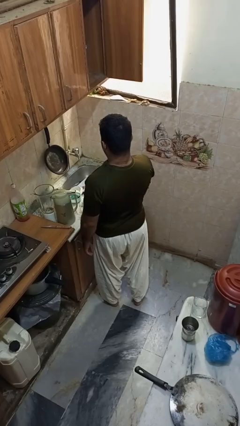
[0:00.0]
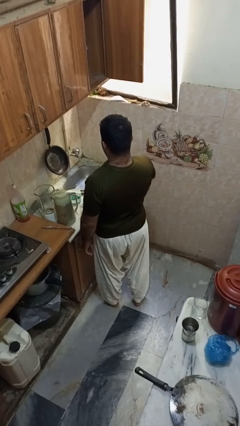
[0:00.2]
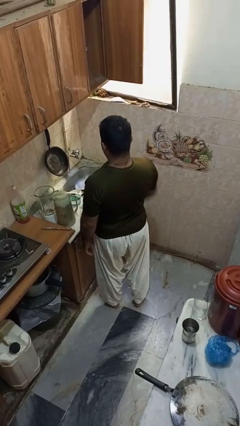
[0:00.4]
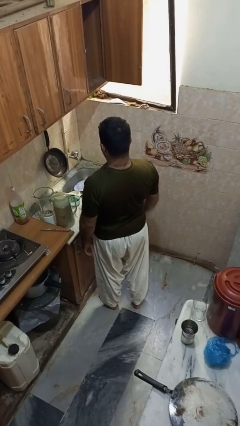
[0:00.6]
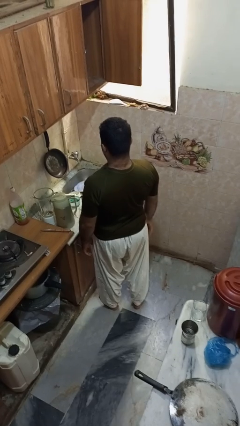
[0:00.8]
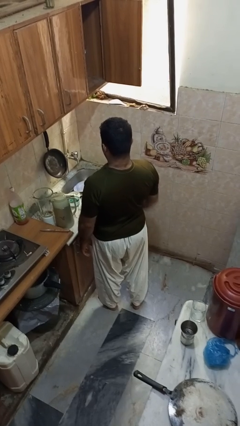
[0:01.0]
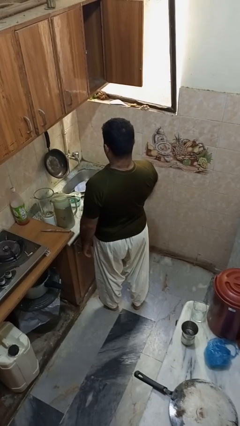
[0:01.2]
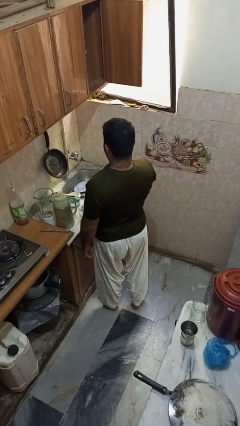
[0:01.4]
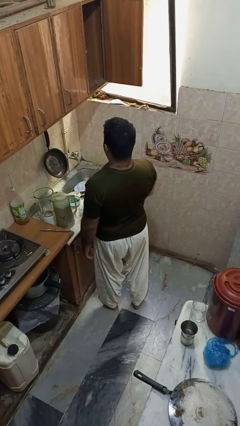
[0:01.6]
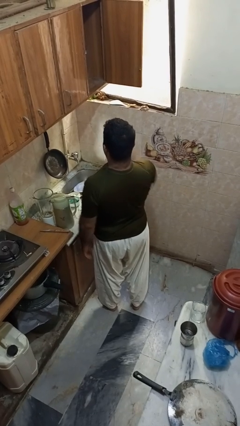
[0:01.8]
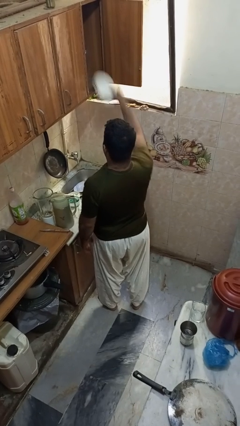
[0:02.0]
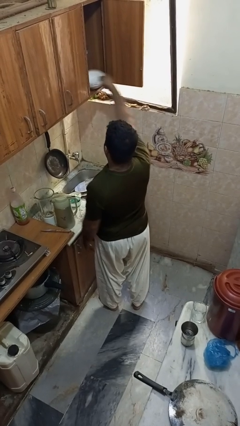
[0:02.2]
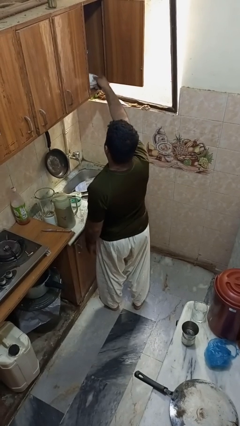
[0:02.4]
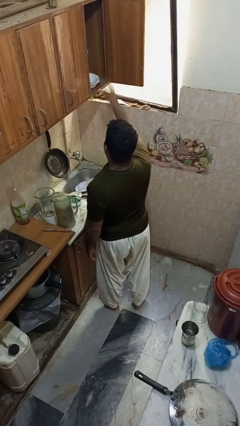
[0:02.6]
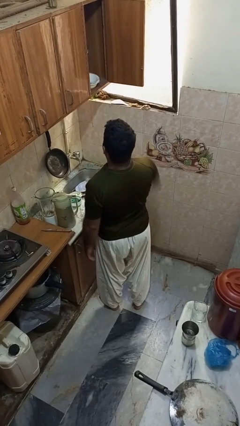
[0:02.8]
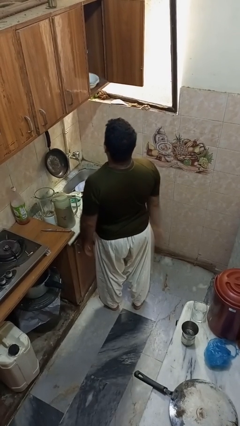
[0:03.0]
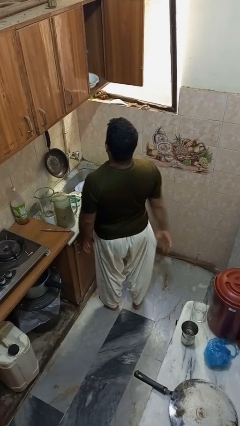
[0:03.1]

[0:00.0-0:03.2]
person puts object in cabinet

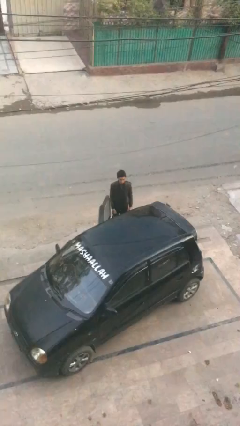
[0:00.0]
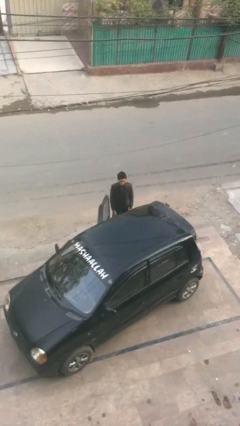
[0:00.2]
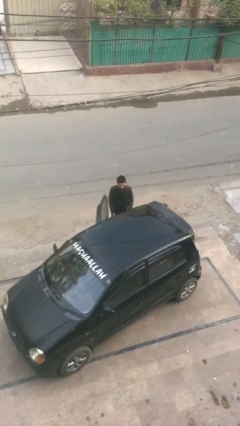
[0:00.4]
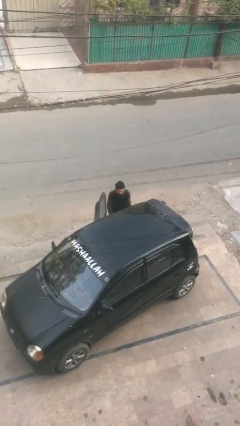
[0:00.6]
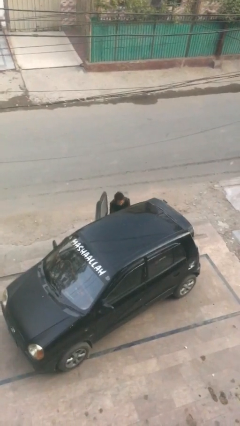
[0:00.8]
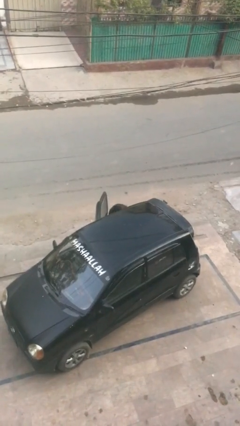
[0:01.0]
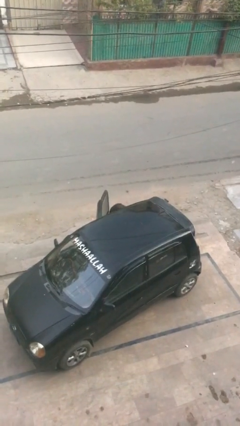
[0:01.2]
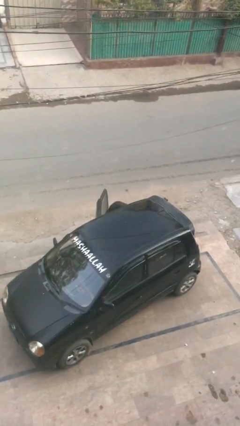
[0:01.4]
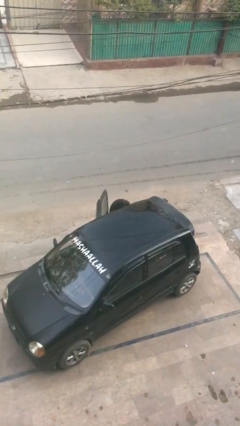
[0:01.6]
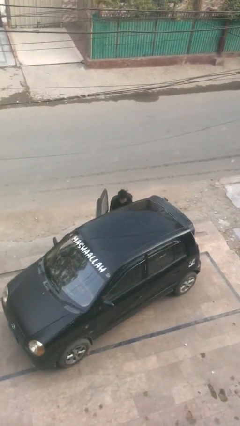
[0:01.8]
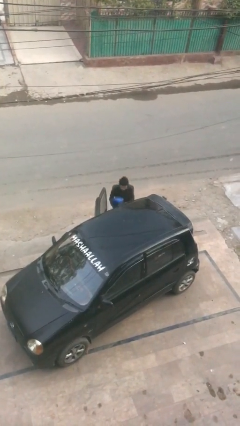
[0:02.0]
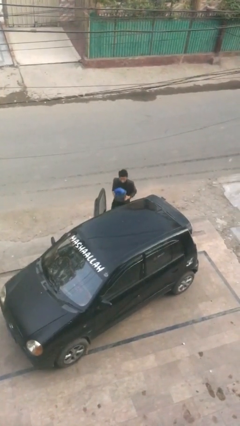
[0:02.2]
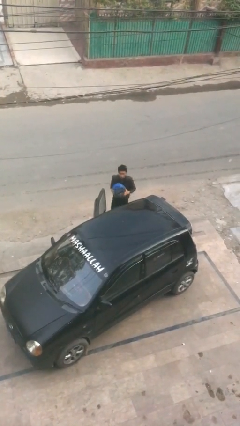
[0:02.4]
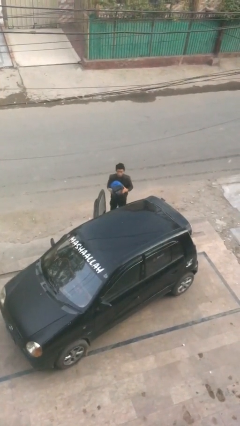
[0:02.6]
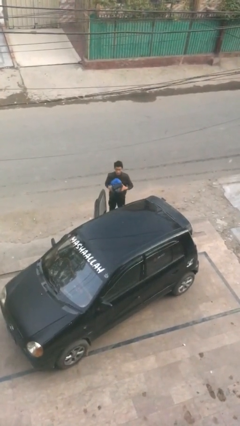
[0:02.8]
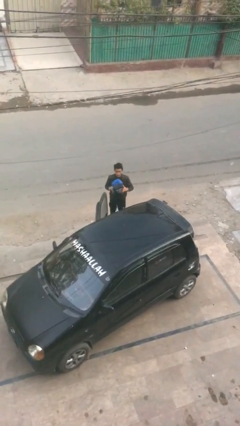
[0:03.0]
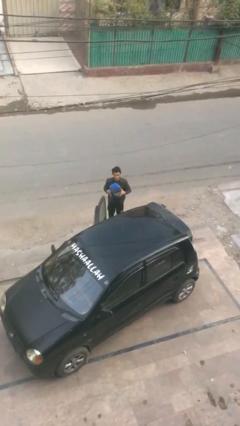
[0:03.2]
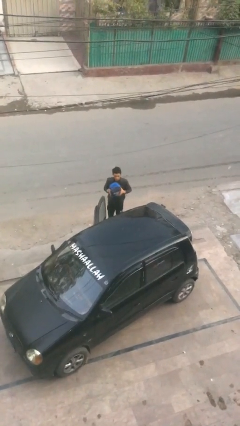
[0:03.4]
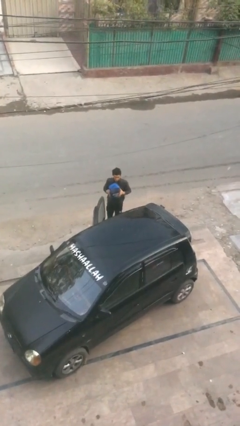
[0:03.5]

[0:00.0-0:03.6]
person unloads car

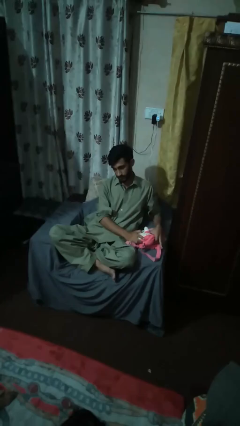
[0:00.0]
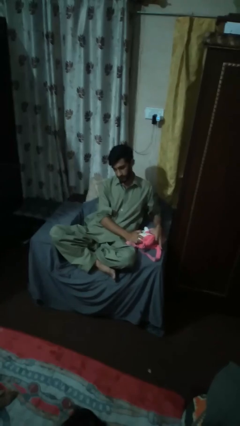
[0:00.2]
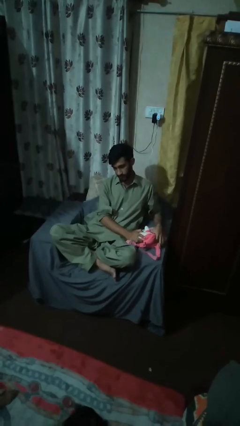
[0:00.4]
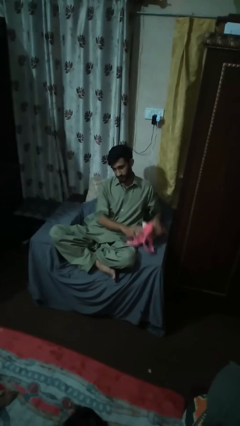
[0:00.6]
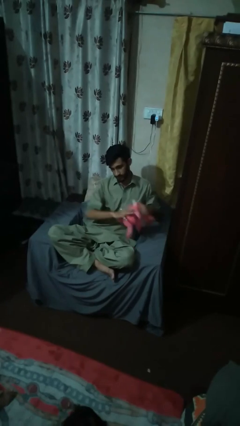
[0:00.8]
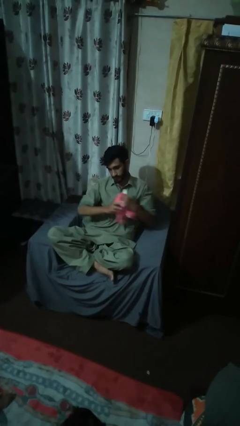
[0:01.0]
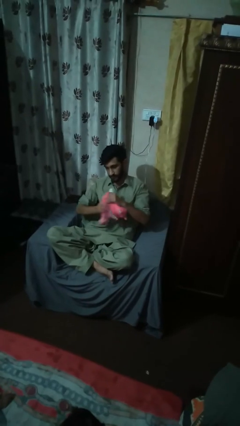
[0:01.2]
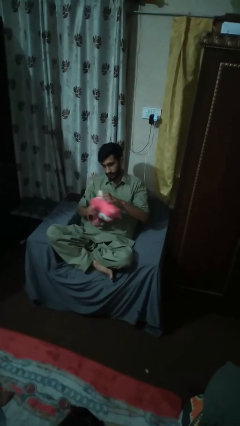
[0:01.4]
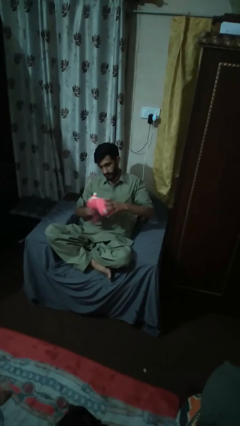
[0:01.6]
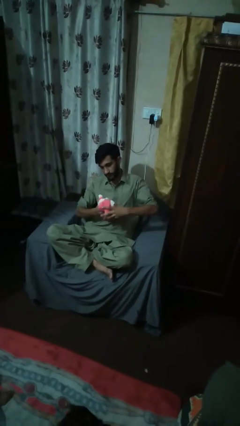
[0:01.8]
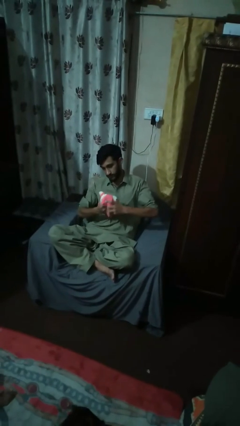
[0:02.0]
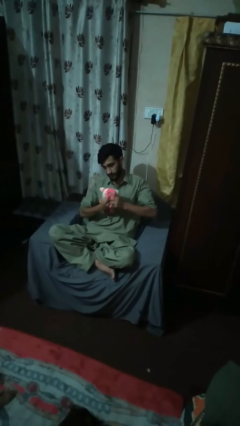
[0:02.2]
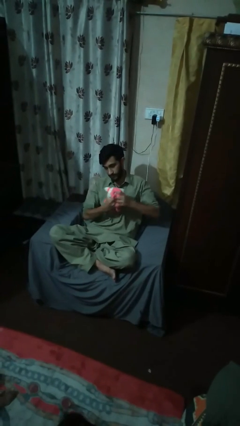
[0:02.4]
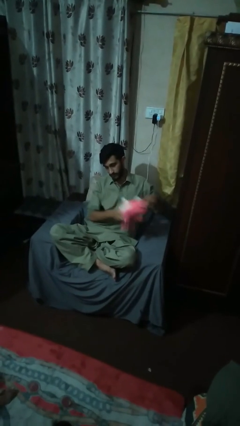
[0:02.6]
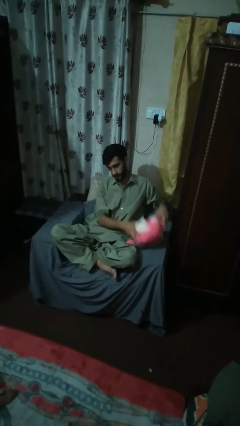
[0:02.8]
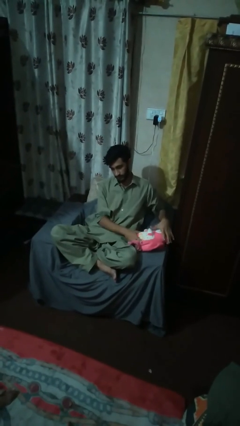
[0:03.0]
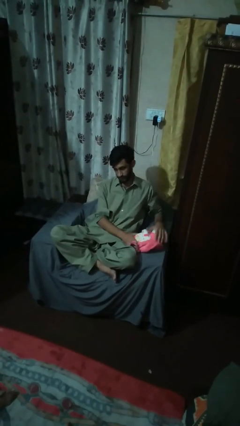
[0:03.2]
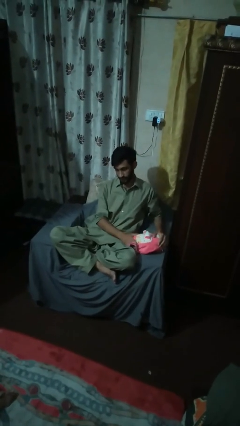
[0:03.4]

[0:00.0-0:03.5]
person squeezes object

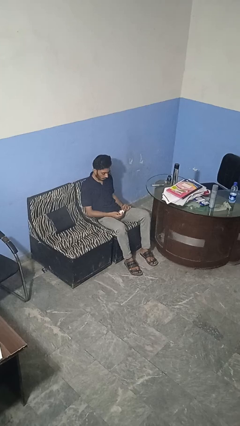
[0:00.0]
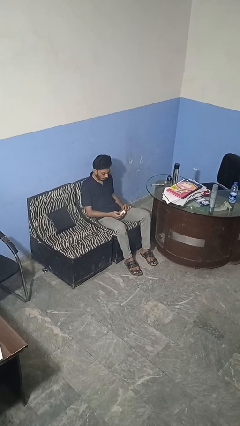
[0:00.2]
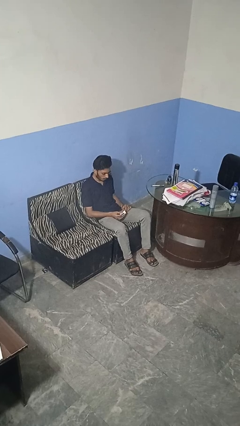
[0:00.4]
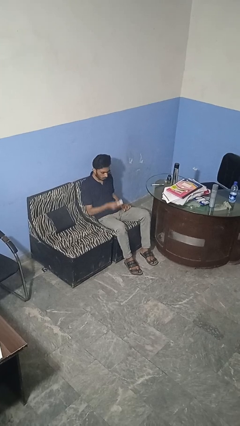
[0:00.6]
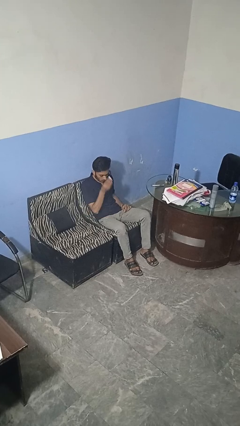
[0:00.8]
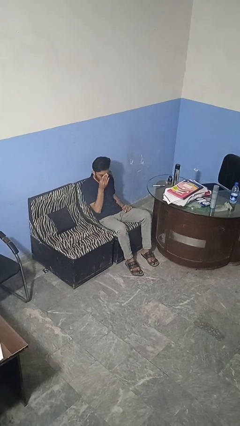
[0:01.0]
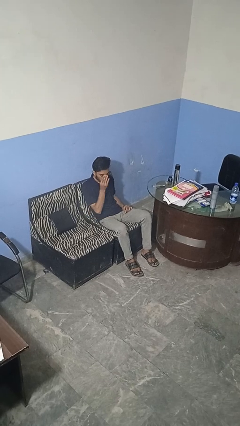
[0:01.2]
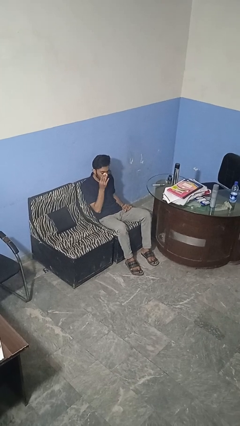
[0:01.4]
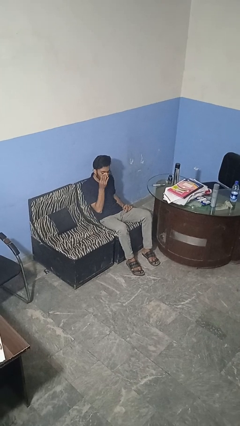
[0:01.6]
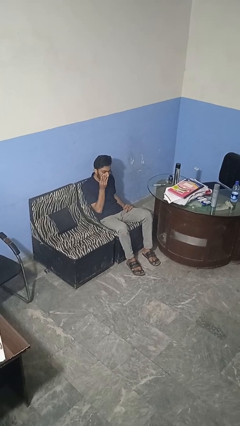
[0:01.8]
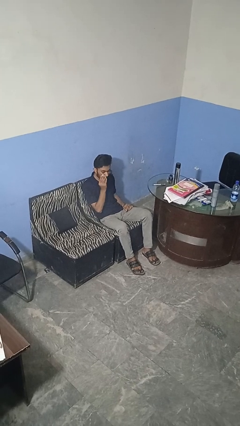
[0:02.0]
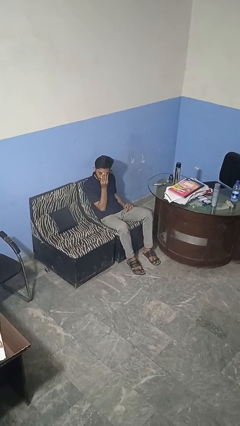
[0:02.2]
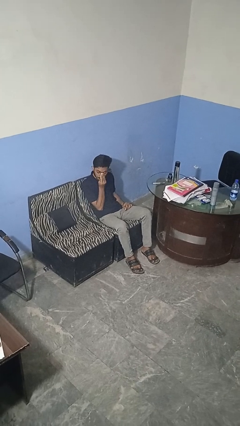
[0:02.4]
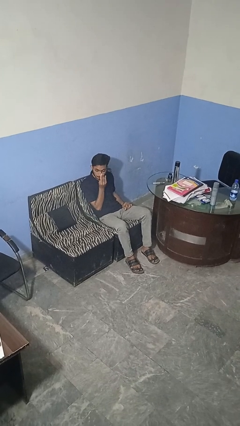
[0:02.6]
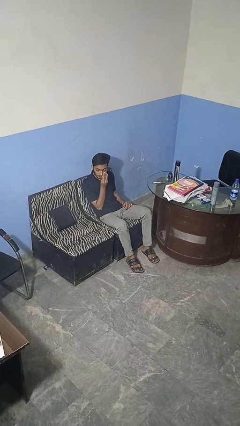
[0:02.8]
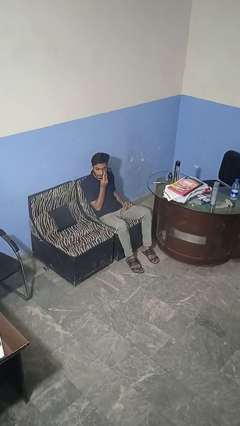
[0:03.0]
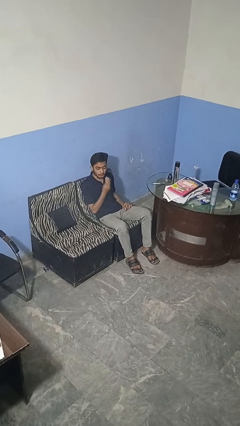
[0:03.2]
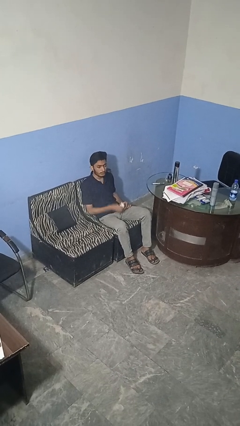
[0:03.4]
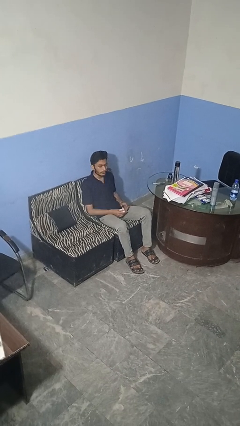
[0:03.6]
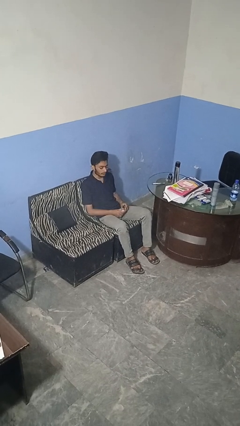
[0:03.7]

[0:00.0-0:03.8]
person wipes mouth with napkin

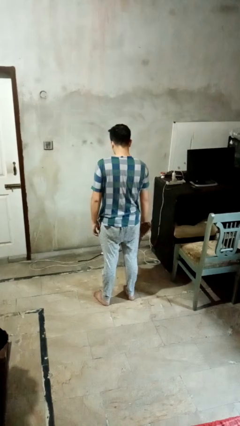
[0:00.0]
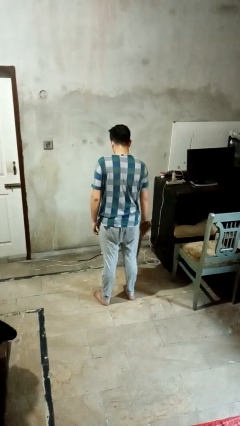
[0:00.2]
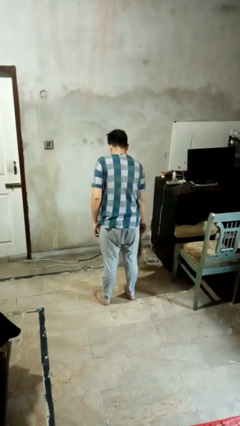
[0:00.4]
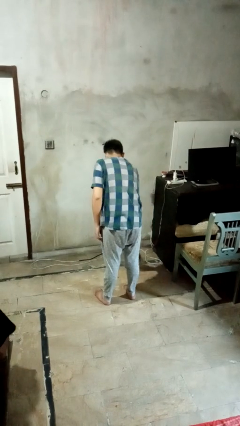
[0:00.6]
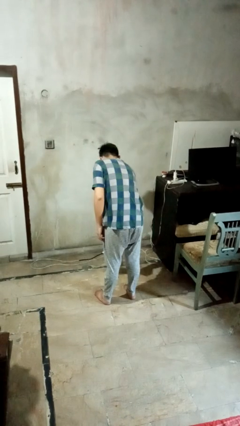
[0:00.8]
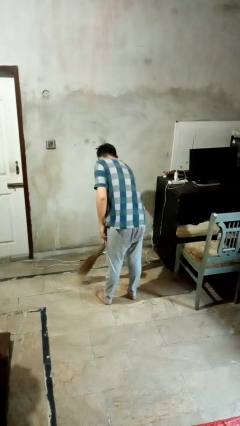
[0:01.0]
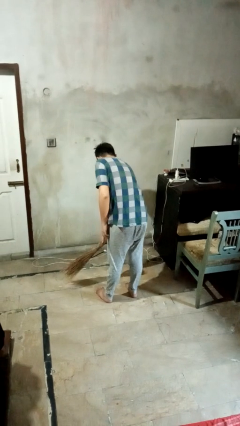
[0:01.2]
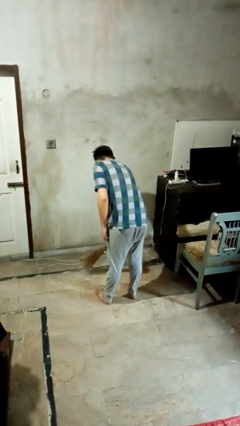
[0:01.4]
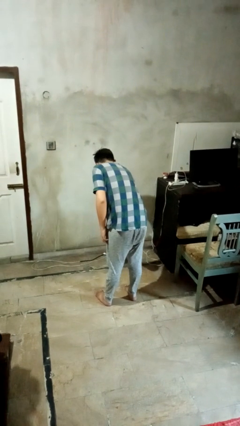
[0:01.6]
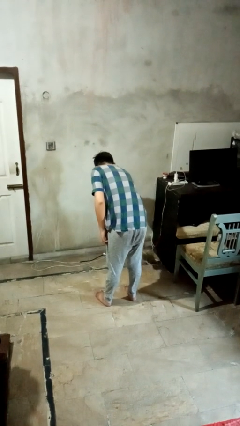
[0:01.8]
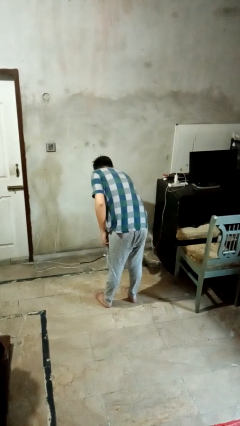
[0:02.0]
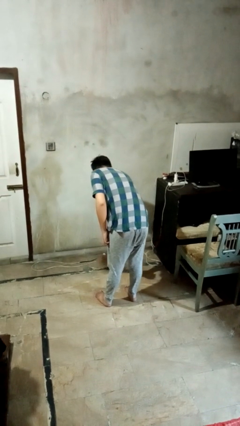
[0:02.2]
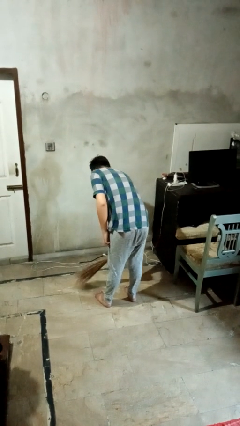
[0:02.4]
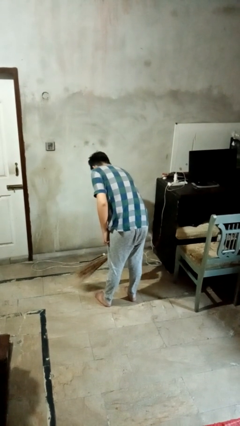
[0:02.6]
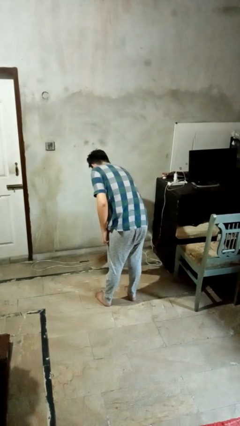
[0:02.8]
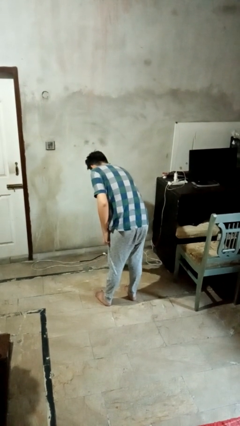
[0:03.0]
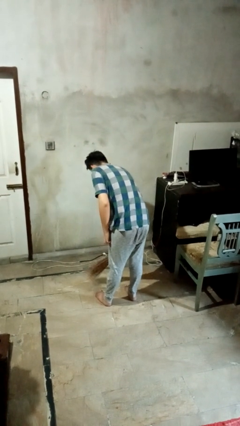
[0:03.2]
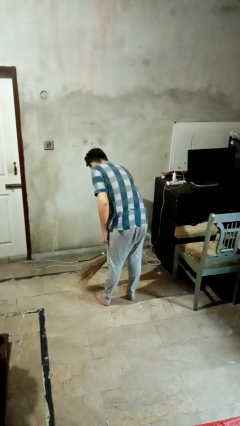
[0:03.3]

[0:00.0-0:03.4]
person sweeps floor
